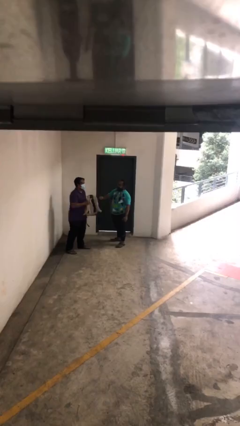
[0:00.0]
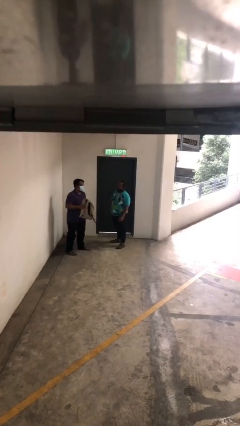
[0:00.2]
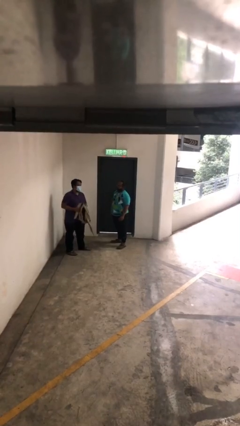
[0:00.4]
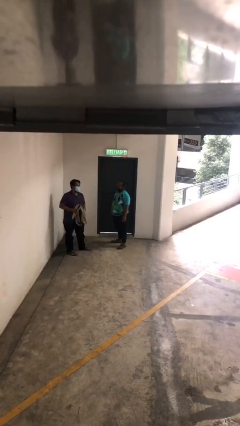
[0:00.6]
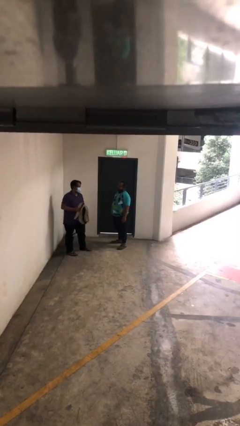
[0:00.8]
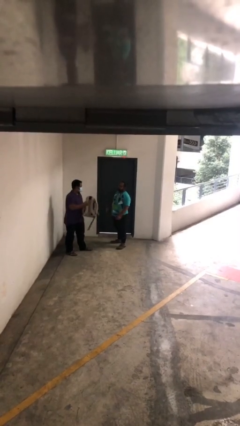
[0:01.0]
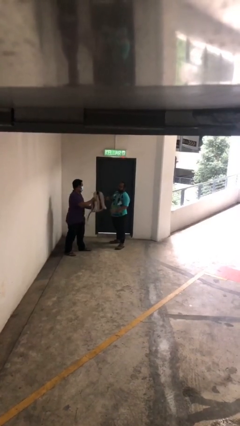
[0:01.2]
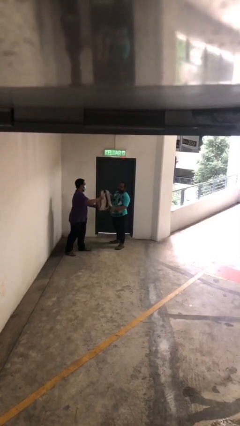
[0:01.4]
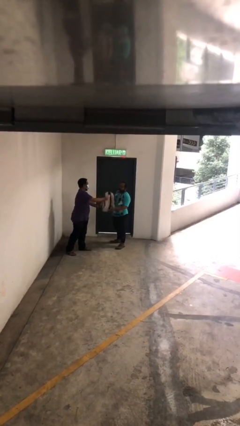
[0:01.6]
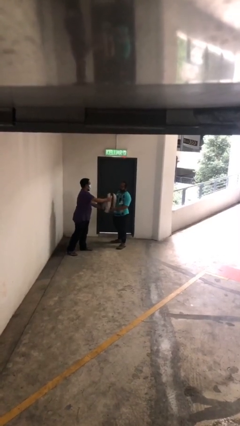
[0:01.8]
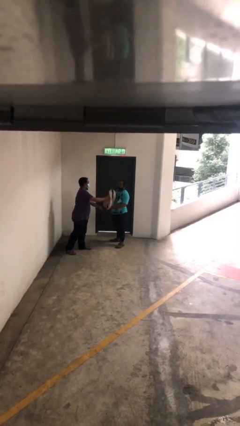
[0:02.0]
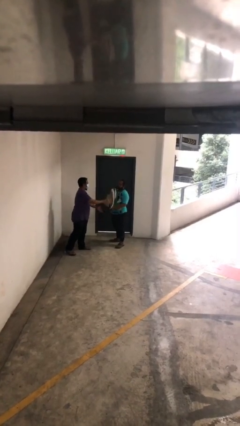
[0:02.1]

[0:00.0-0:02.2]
person transfers object to person

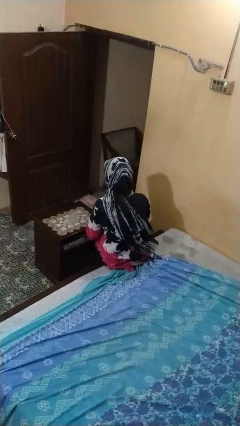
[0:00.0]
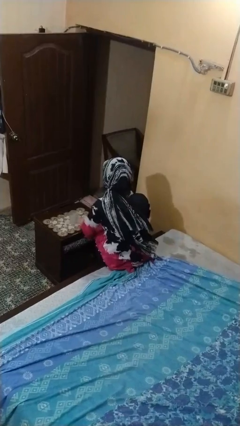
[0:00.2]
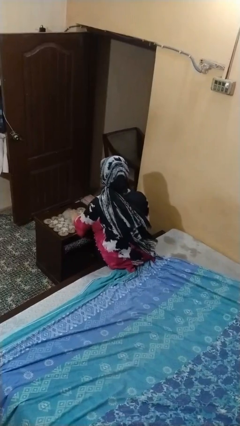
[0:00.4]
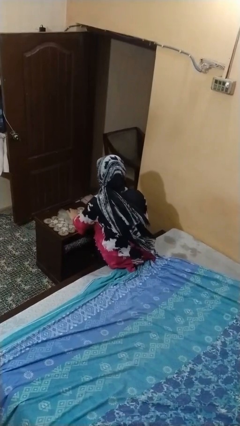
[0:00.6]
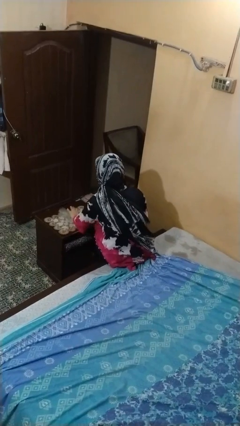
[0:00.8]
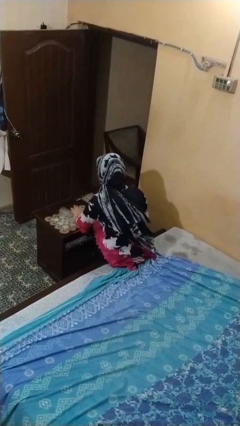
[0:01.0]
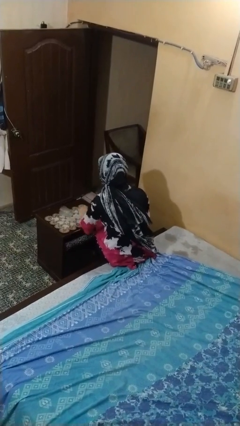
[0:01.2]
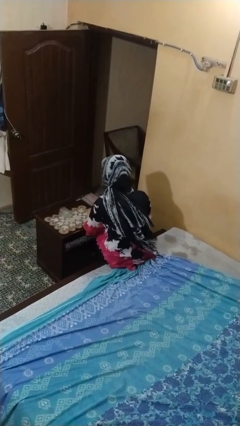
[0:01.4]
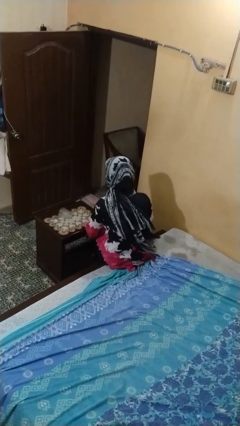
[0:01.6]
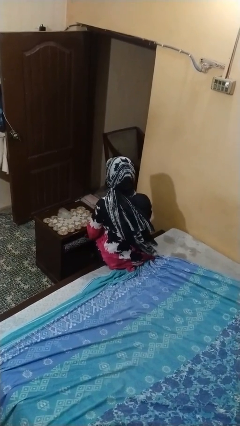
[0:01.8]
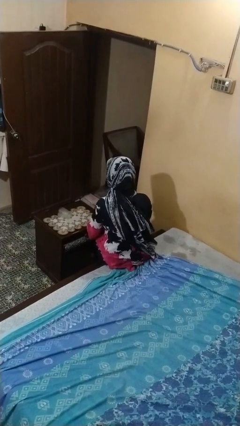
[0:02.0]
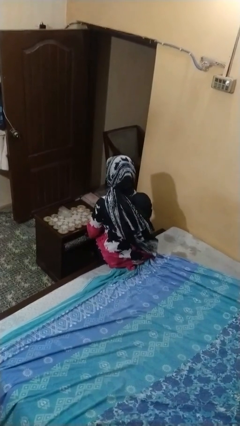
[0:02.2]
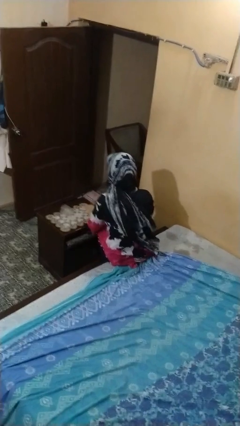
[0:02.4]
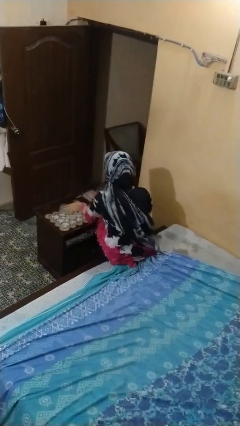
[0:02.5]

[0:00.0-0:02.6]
person knocks over glass

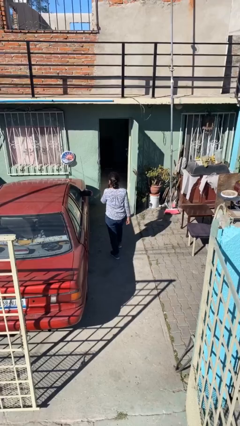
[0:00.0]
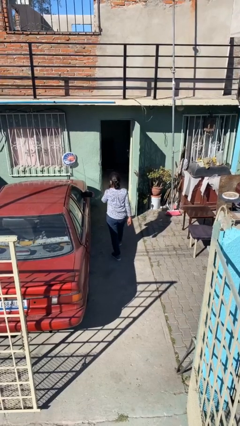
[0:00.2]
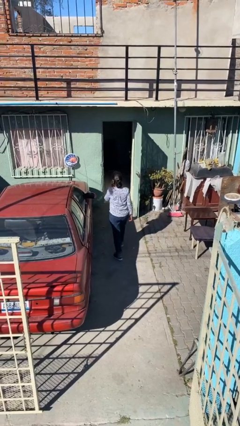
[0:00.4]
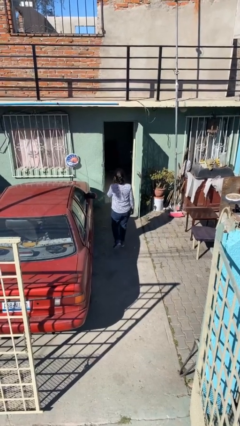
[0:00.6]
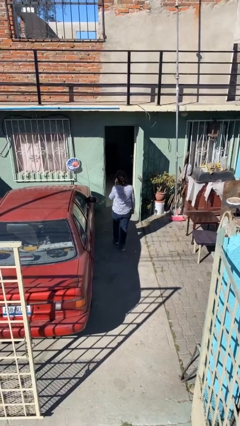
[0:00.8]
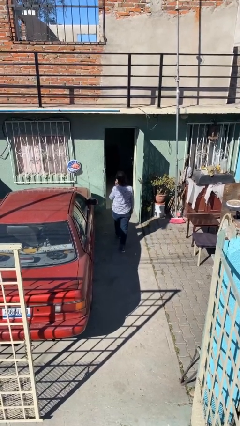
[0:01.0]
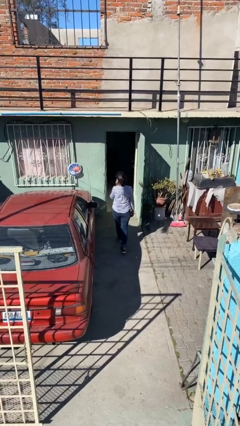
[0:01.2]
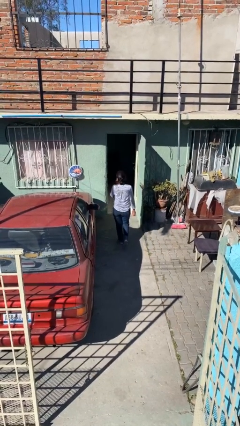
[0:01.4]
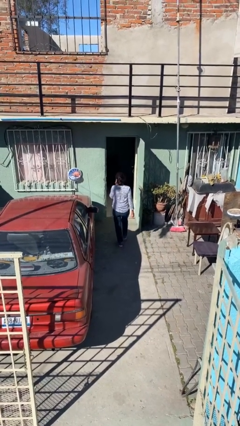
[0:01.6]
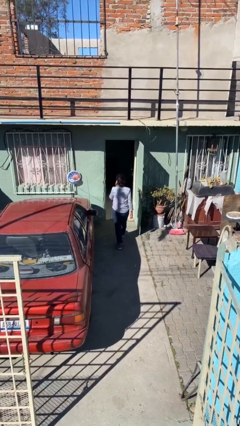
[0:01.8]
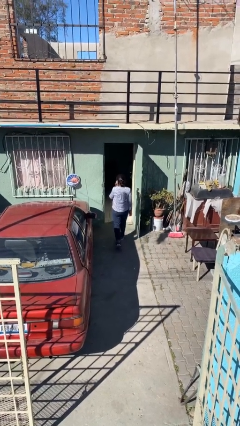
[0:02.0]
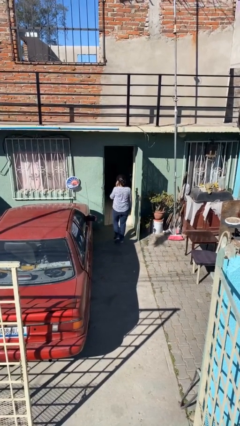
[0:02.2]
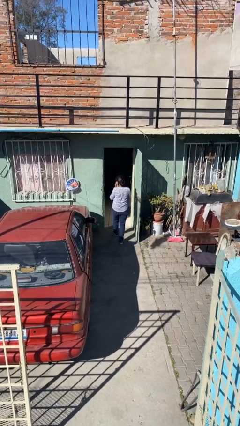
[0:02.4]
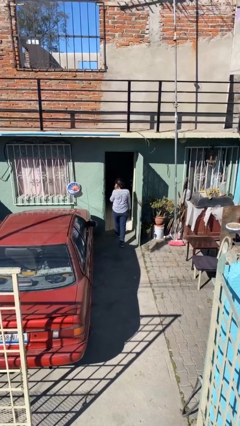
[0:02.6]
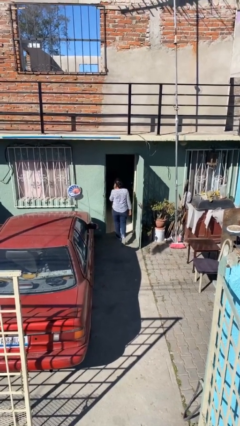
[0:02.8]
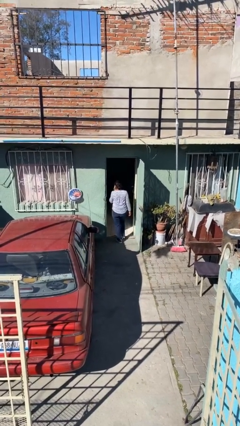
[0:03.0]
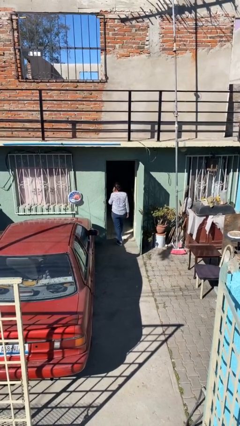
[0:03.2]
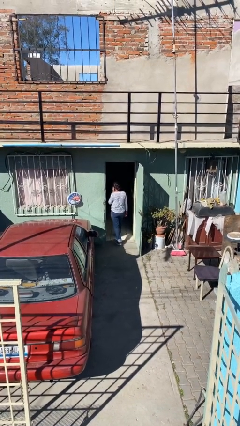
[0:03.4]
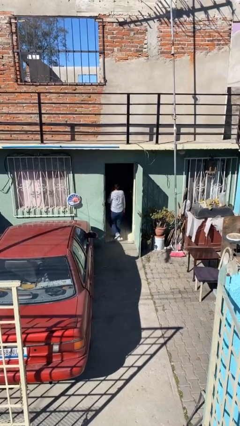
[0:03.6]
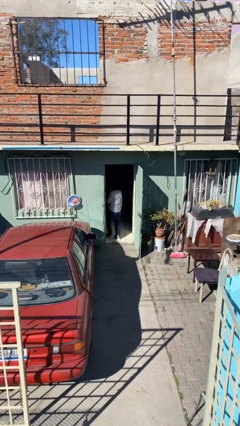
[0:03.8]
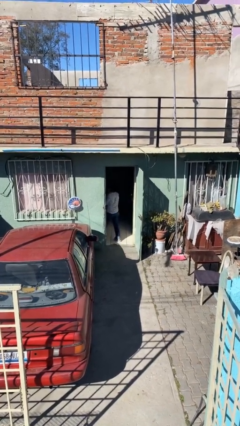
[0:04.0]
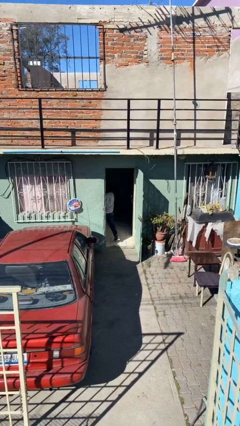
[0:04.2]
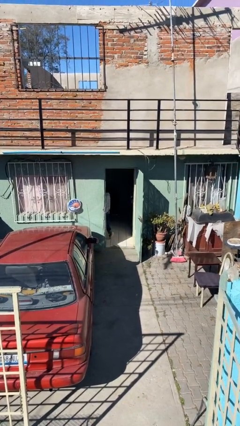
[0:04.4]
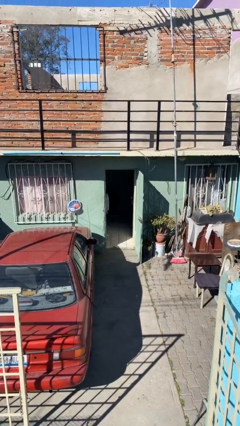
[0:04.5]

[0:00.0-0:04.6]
person exits scene through structure

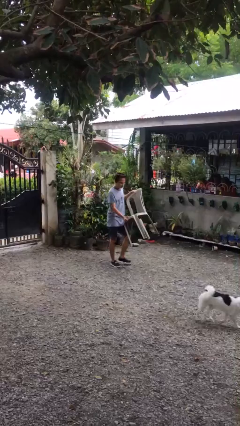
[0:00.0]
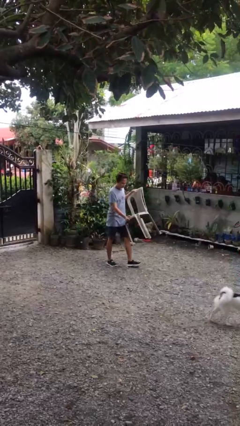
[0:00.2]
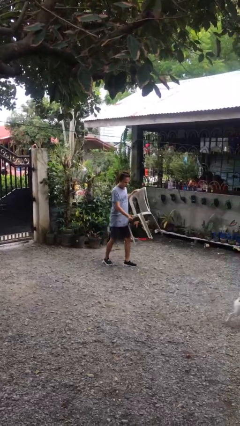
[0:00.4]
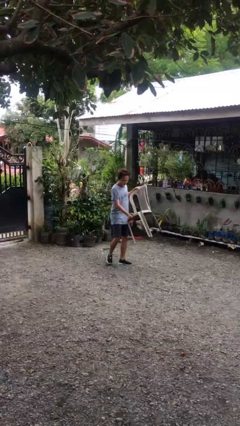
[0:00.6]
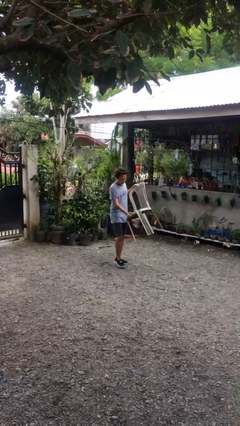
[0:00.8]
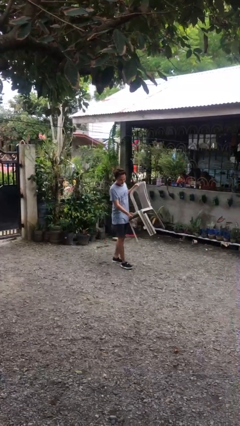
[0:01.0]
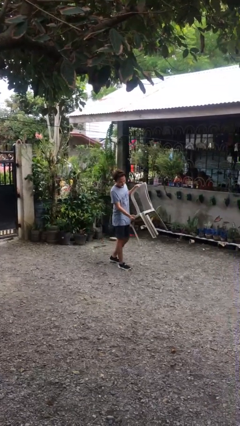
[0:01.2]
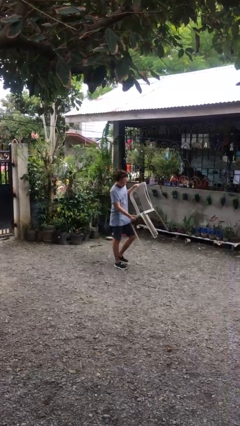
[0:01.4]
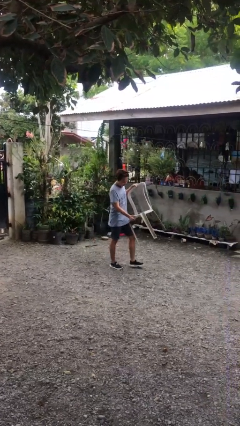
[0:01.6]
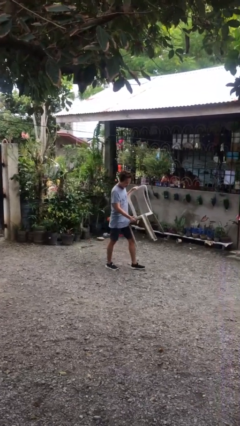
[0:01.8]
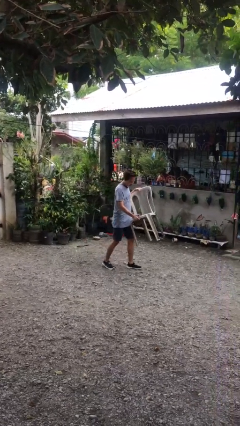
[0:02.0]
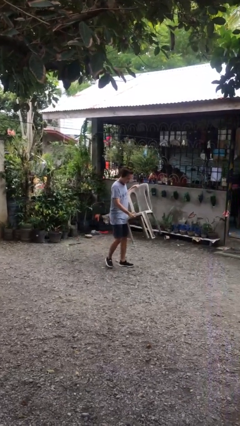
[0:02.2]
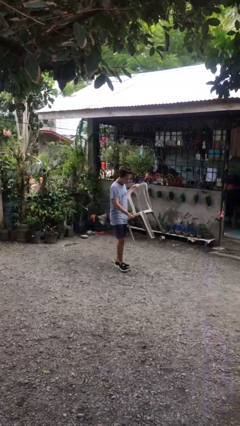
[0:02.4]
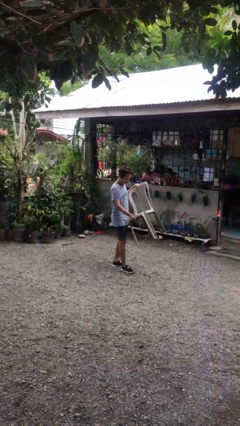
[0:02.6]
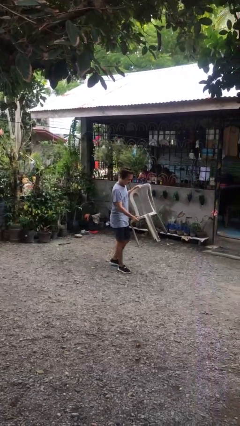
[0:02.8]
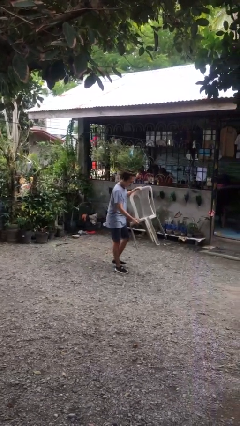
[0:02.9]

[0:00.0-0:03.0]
person carries heavy object

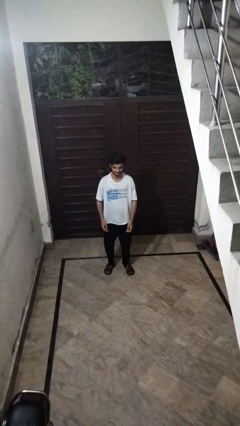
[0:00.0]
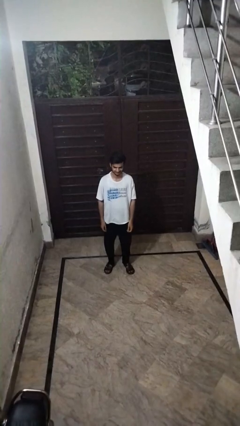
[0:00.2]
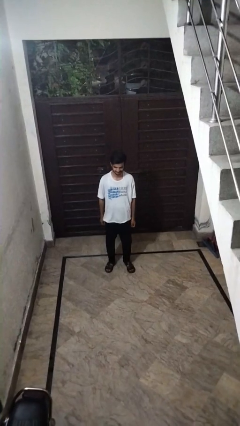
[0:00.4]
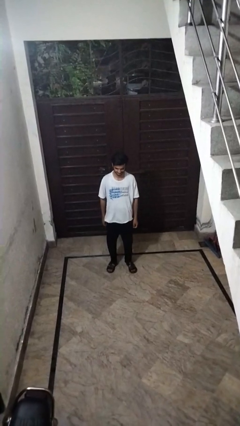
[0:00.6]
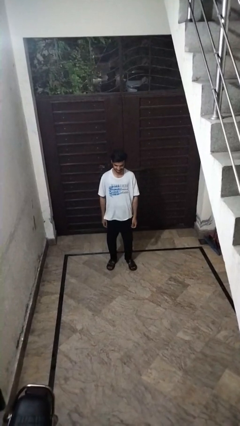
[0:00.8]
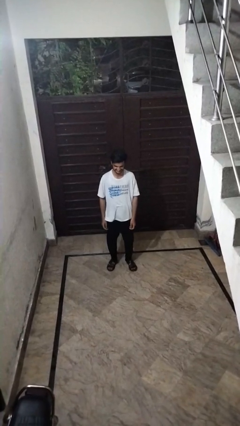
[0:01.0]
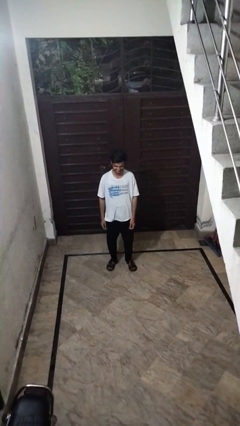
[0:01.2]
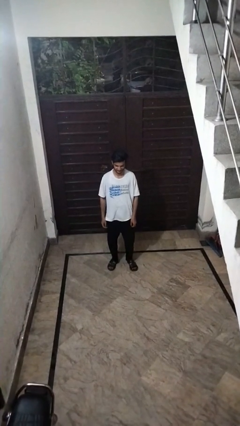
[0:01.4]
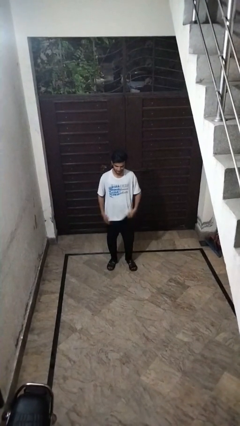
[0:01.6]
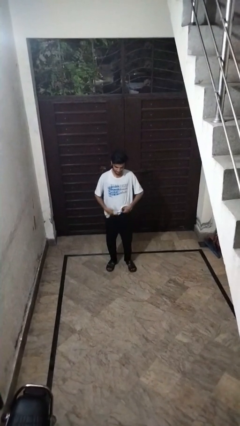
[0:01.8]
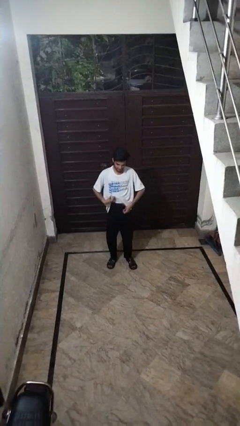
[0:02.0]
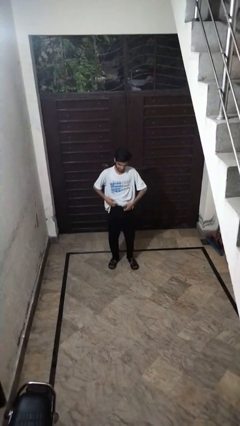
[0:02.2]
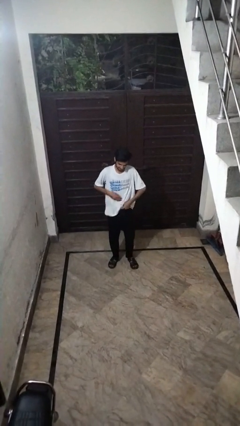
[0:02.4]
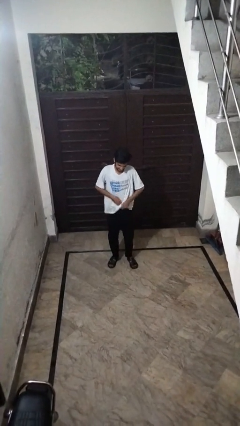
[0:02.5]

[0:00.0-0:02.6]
person closes facility door

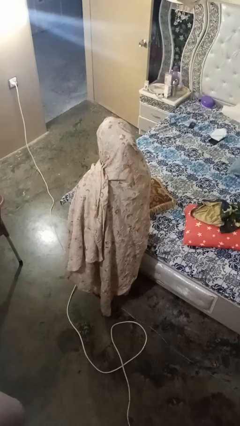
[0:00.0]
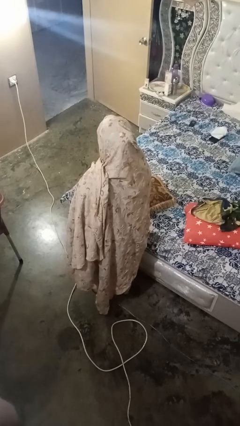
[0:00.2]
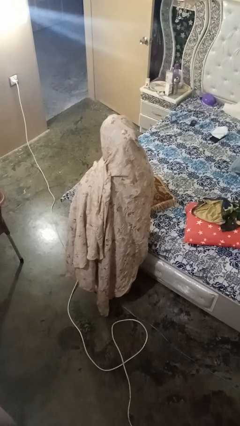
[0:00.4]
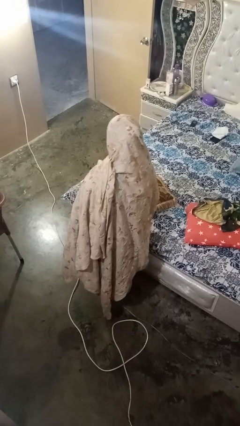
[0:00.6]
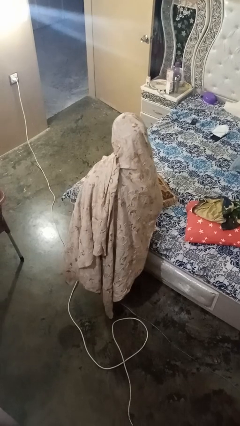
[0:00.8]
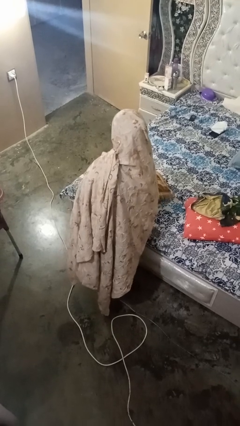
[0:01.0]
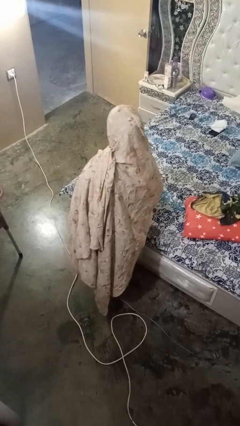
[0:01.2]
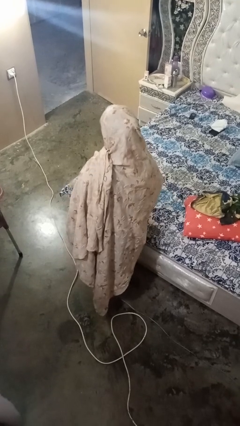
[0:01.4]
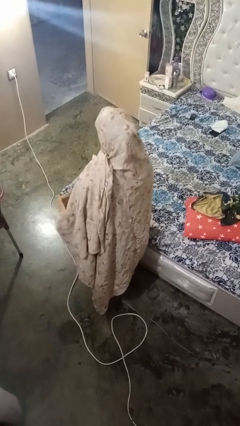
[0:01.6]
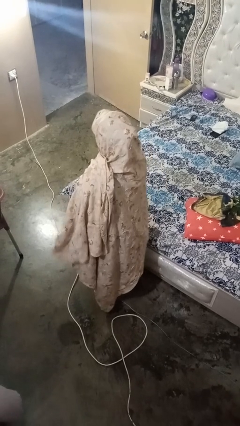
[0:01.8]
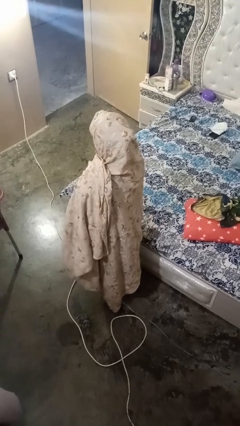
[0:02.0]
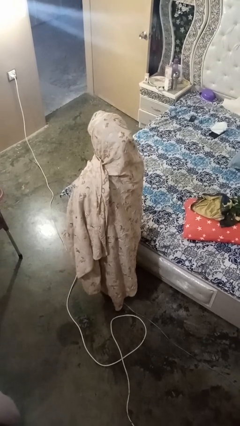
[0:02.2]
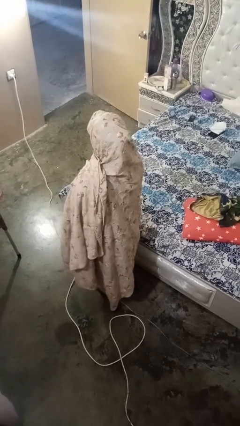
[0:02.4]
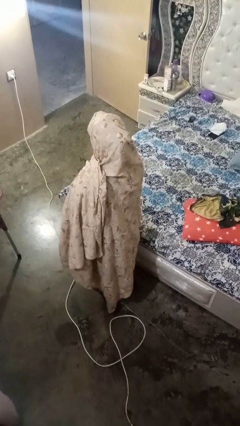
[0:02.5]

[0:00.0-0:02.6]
person picks up object from bed
